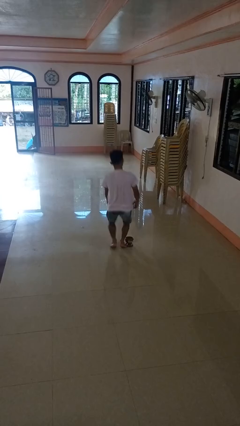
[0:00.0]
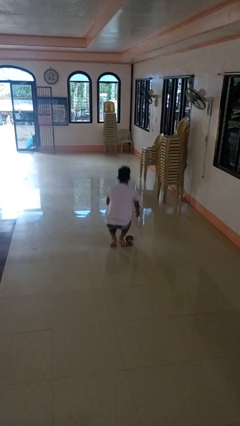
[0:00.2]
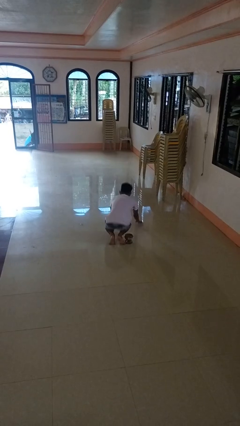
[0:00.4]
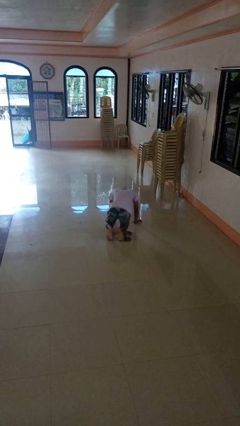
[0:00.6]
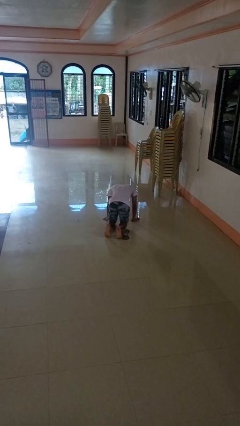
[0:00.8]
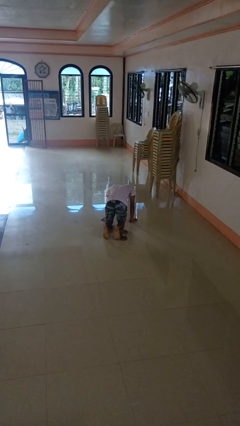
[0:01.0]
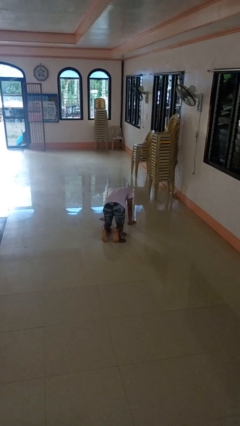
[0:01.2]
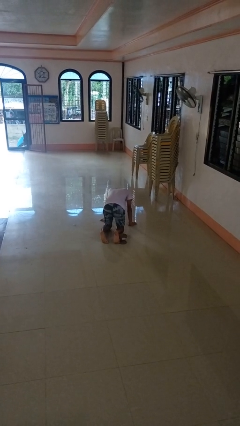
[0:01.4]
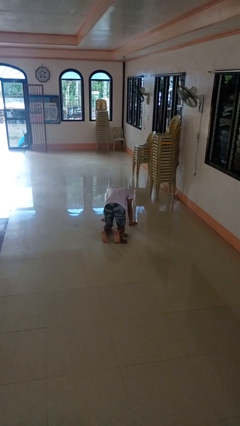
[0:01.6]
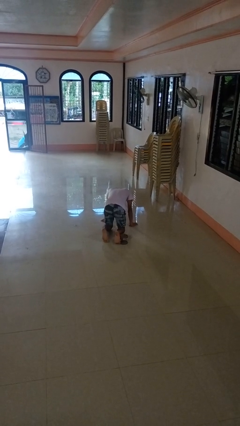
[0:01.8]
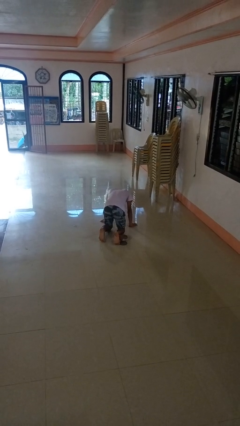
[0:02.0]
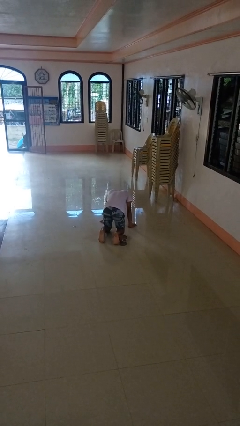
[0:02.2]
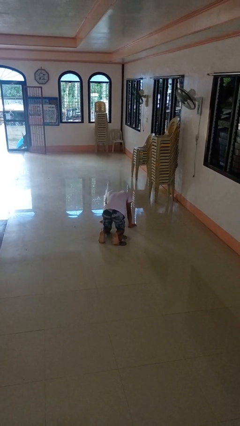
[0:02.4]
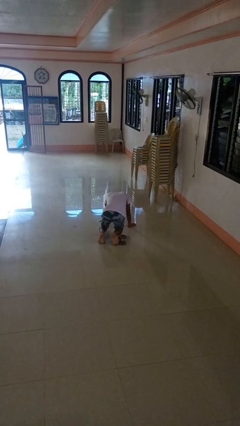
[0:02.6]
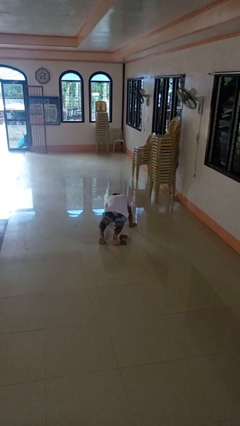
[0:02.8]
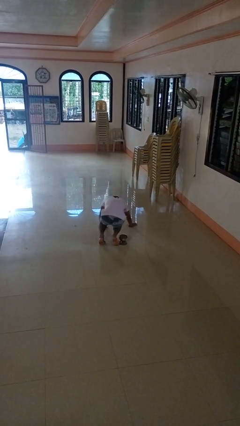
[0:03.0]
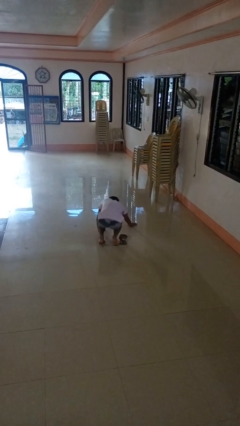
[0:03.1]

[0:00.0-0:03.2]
person trips on object on floor

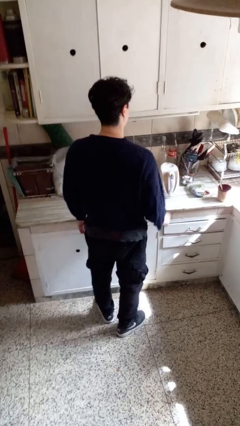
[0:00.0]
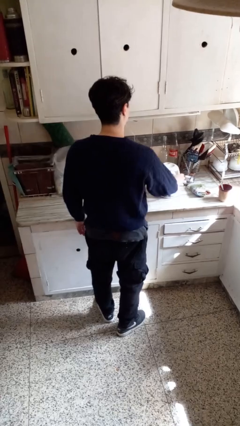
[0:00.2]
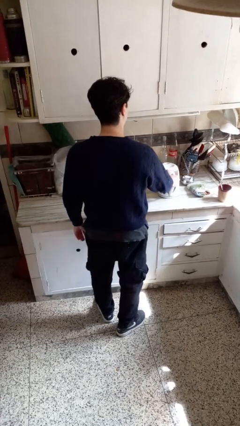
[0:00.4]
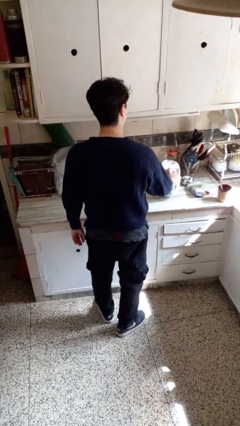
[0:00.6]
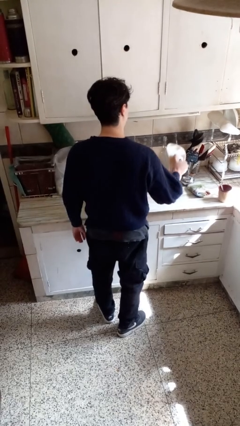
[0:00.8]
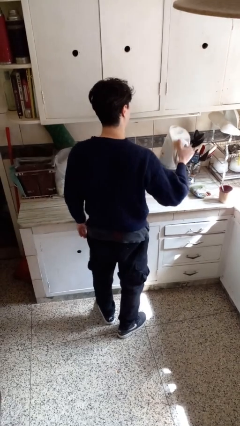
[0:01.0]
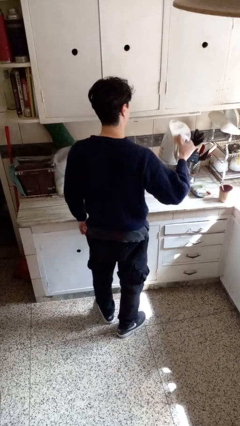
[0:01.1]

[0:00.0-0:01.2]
person picks up object from countertop

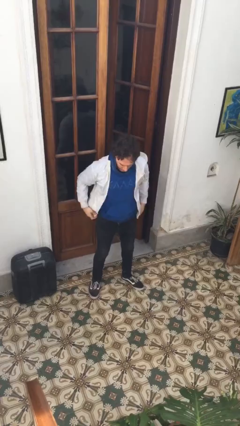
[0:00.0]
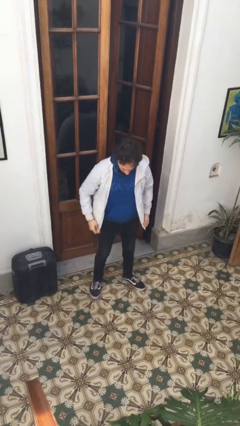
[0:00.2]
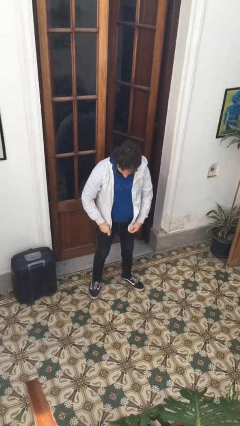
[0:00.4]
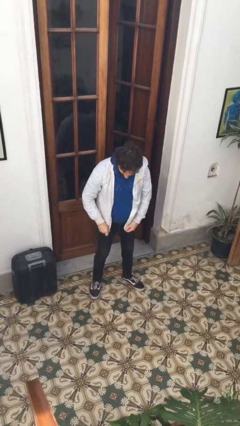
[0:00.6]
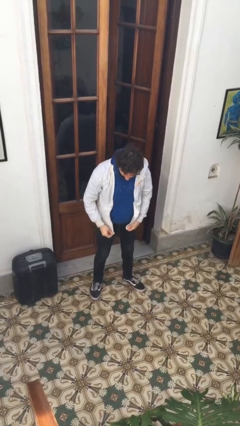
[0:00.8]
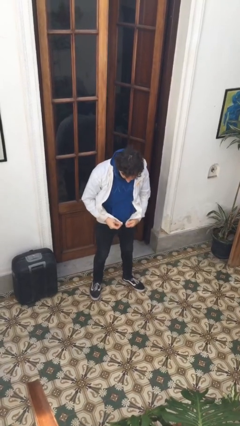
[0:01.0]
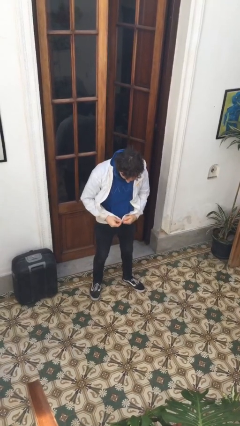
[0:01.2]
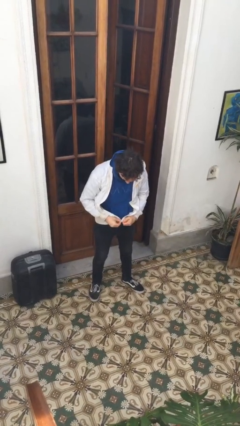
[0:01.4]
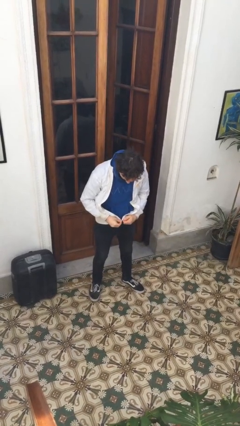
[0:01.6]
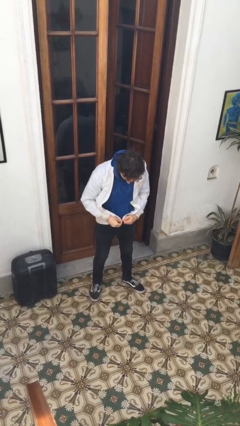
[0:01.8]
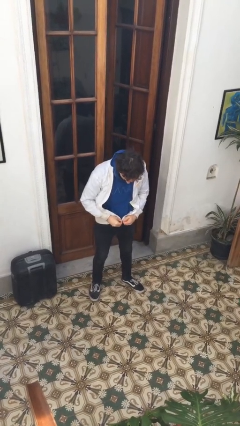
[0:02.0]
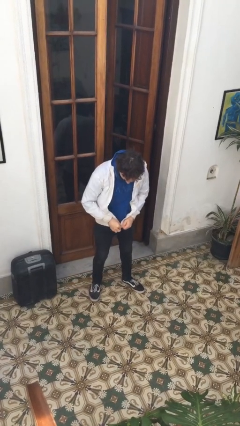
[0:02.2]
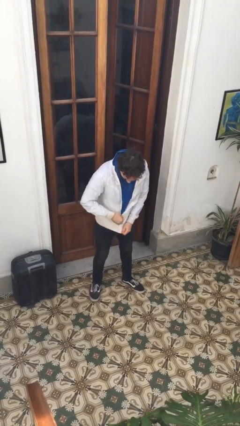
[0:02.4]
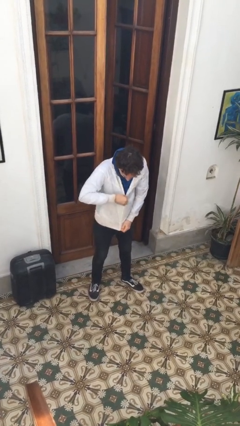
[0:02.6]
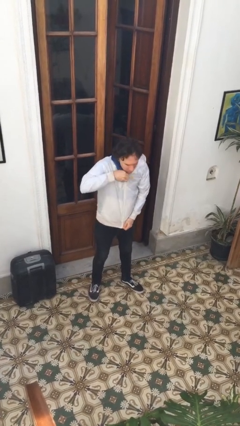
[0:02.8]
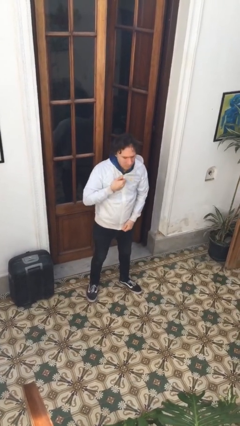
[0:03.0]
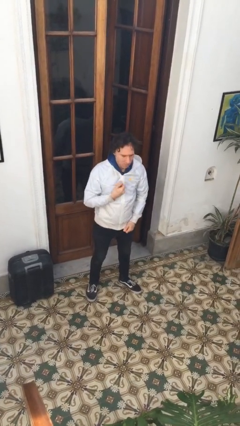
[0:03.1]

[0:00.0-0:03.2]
person zips up jacket

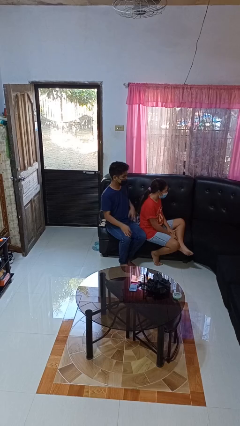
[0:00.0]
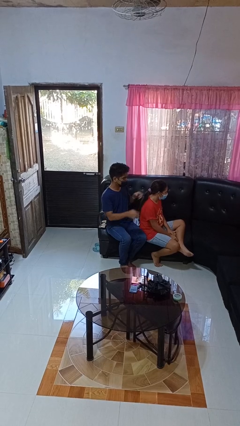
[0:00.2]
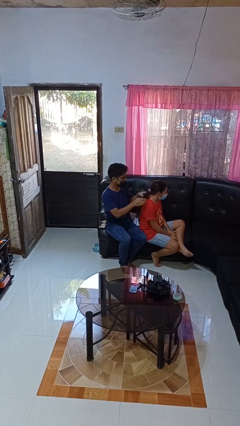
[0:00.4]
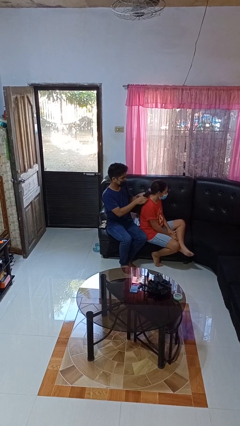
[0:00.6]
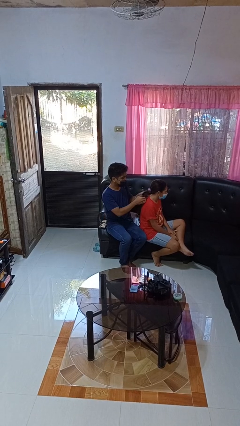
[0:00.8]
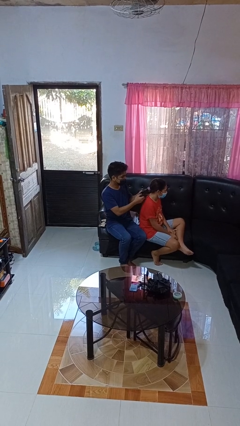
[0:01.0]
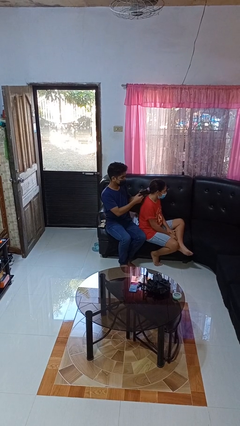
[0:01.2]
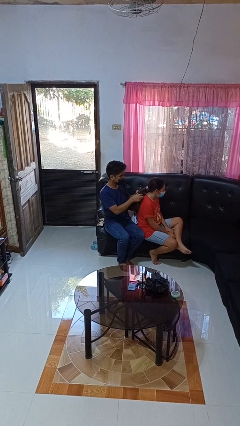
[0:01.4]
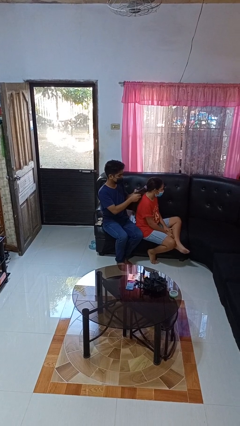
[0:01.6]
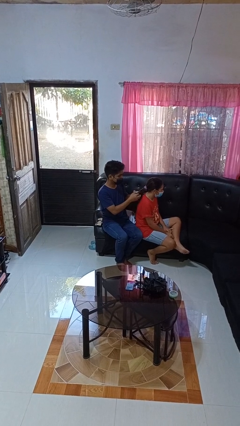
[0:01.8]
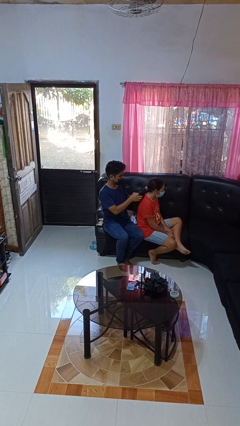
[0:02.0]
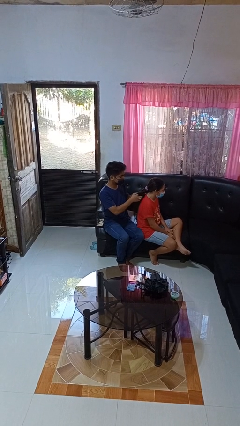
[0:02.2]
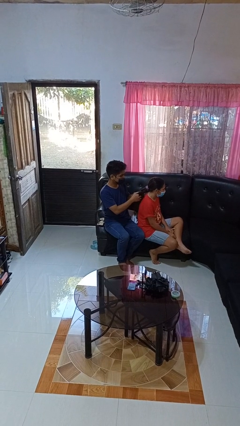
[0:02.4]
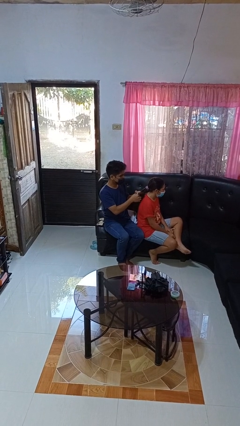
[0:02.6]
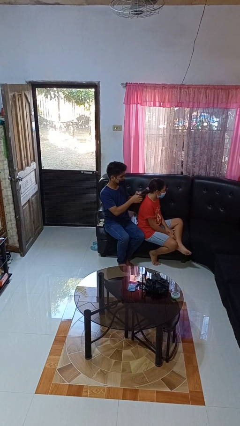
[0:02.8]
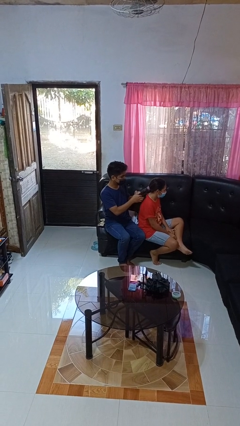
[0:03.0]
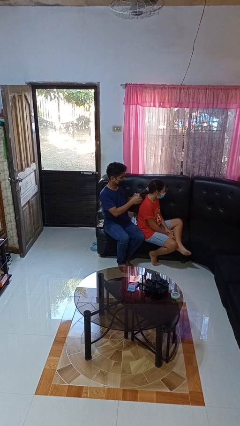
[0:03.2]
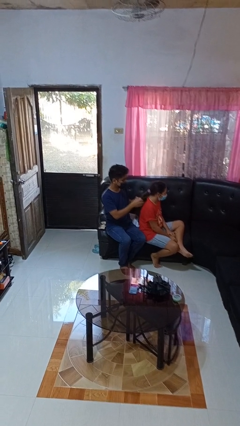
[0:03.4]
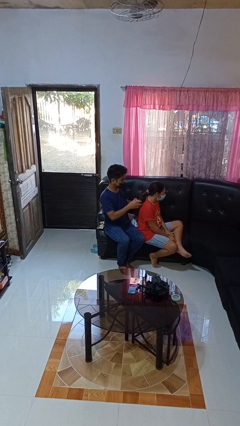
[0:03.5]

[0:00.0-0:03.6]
person braids hair of person

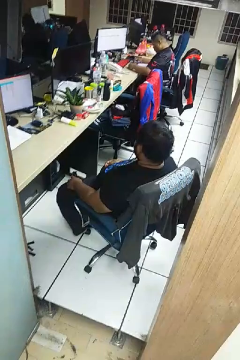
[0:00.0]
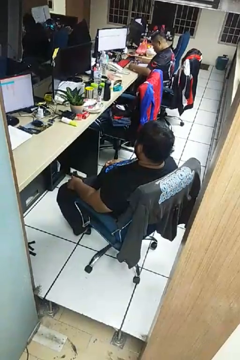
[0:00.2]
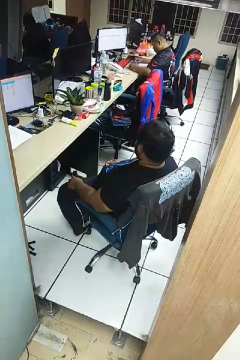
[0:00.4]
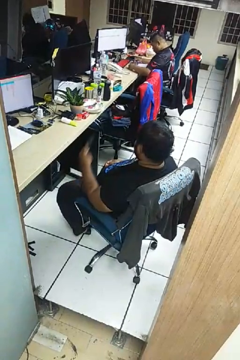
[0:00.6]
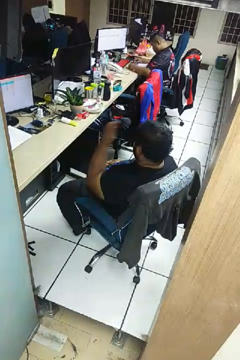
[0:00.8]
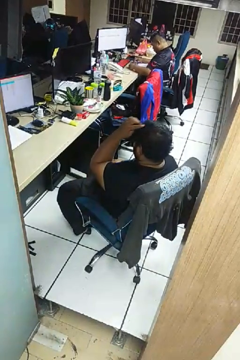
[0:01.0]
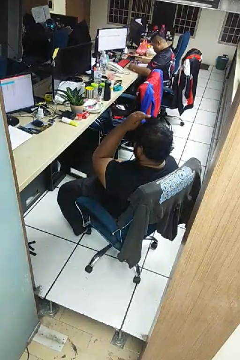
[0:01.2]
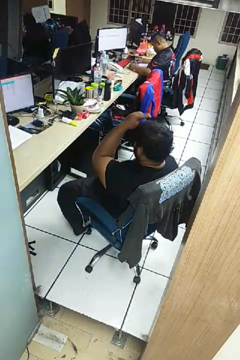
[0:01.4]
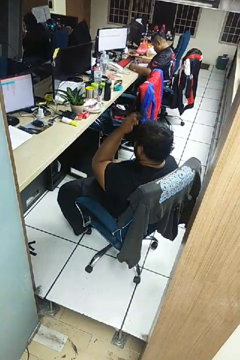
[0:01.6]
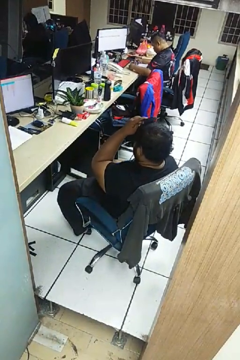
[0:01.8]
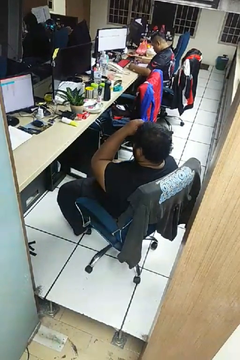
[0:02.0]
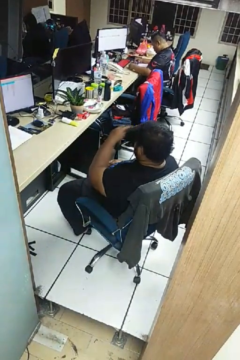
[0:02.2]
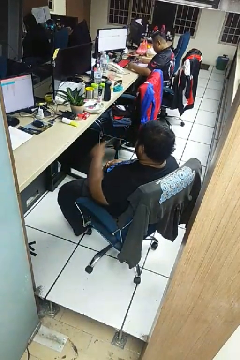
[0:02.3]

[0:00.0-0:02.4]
person brushes hair

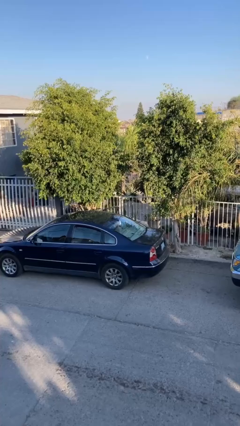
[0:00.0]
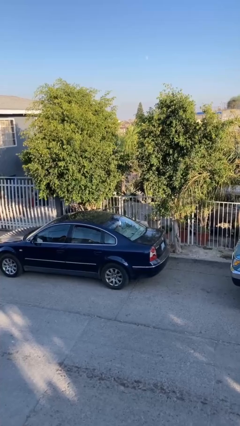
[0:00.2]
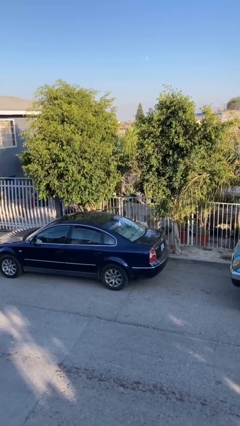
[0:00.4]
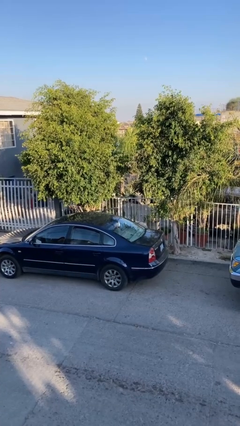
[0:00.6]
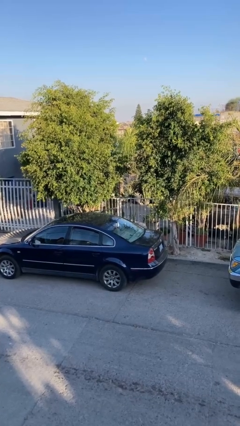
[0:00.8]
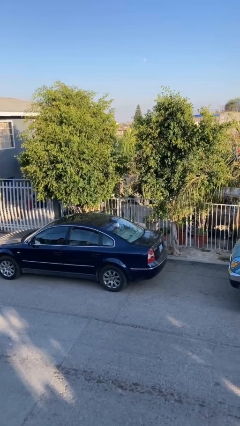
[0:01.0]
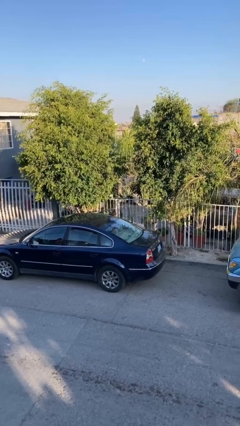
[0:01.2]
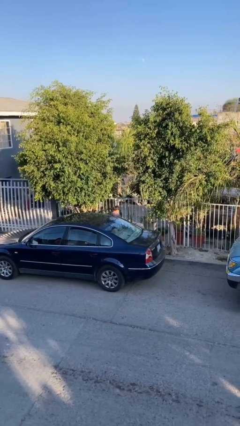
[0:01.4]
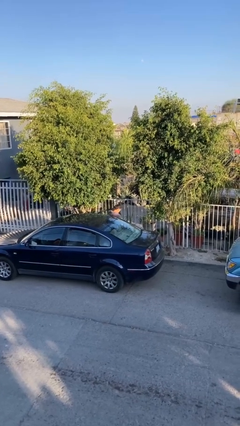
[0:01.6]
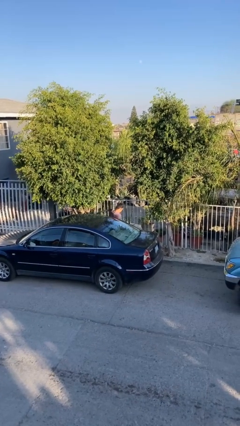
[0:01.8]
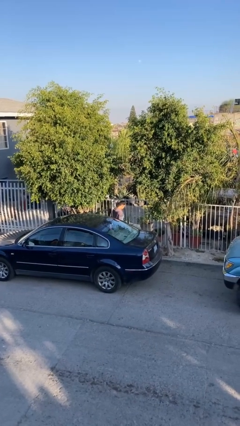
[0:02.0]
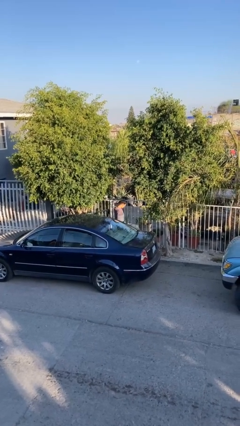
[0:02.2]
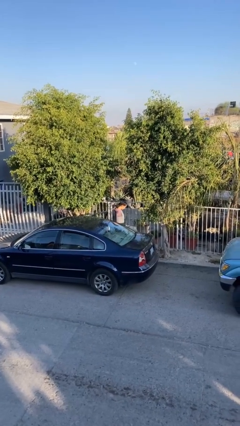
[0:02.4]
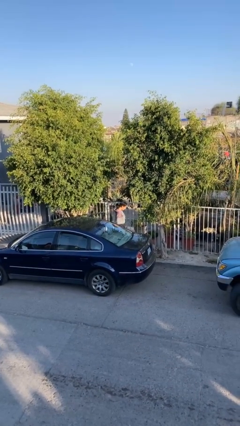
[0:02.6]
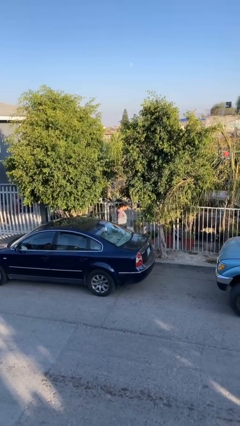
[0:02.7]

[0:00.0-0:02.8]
person exits car

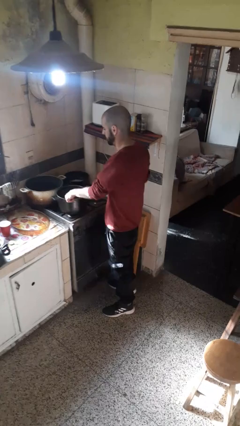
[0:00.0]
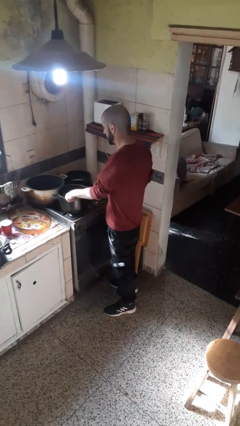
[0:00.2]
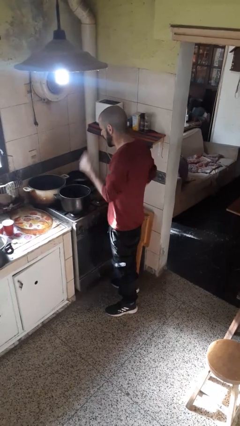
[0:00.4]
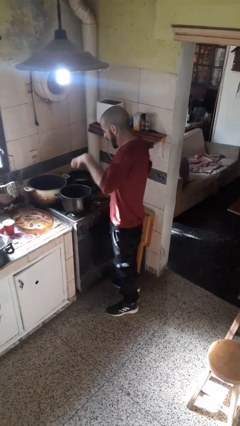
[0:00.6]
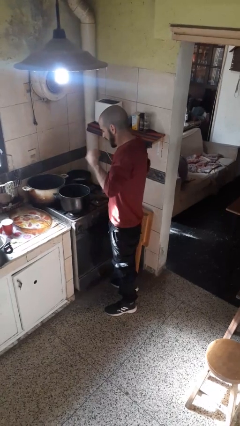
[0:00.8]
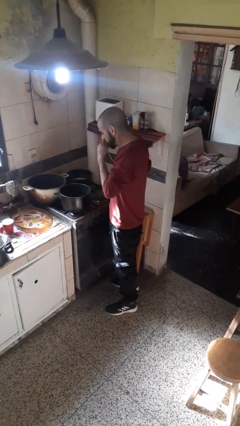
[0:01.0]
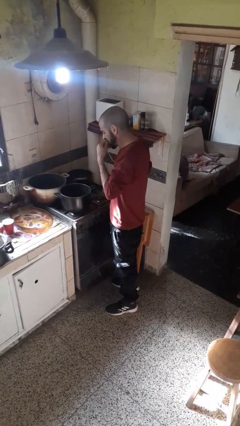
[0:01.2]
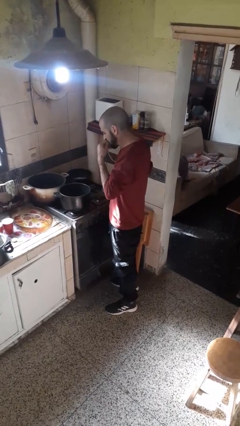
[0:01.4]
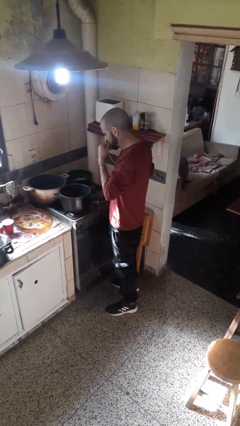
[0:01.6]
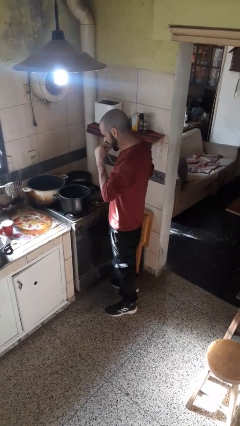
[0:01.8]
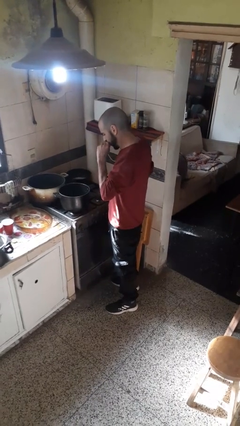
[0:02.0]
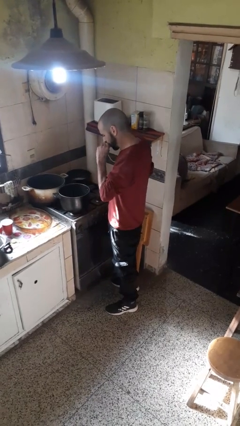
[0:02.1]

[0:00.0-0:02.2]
person burns hand
